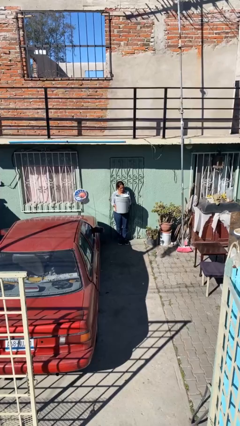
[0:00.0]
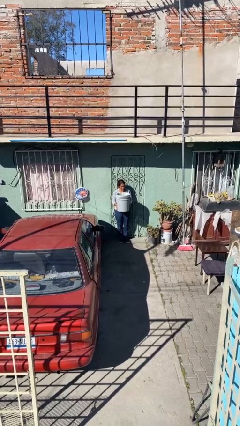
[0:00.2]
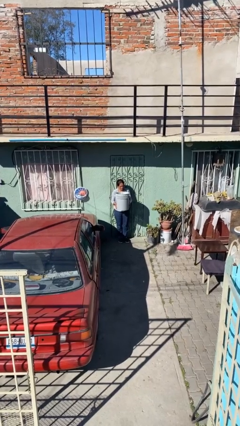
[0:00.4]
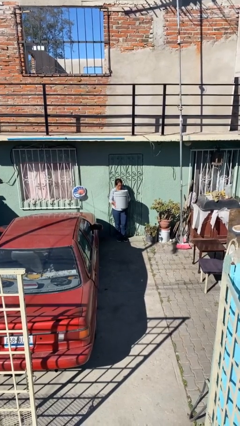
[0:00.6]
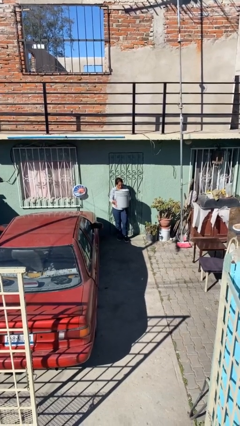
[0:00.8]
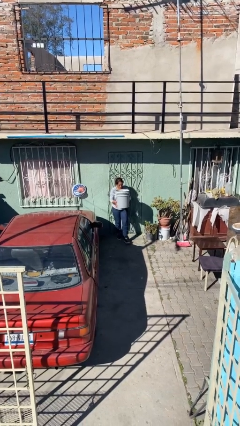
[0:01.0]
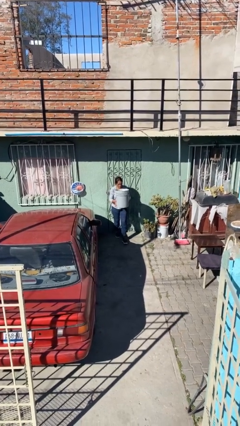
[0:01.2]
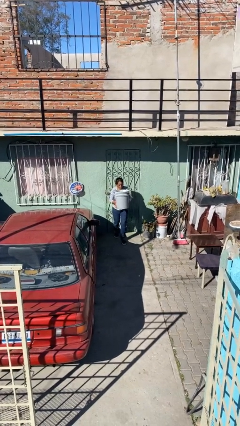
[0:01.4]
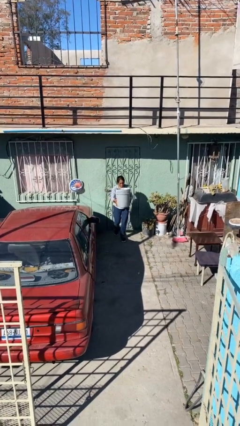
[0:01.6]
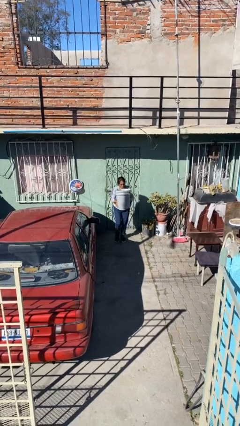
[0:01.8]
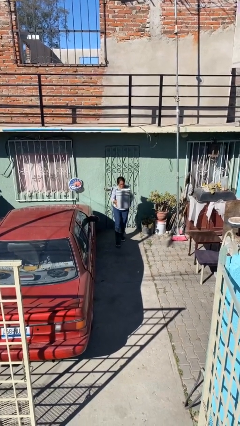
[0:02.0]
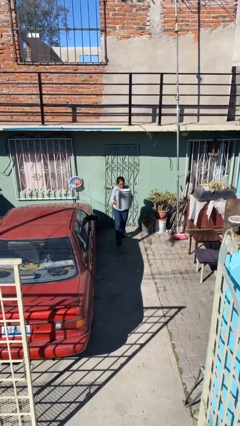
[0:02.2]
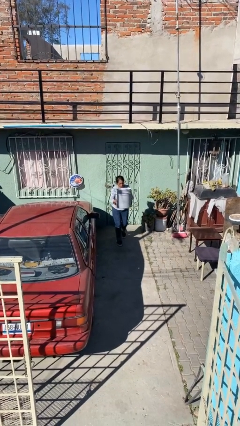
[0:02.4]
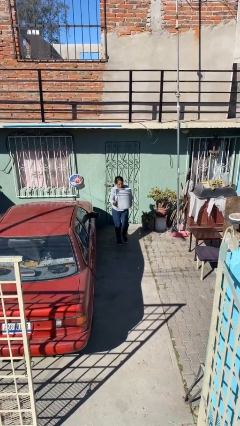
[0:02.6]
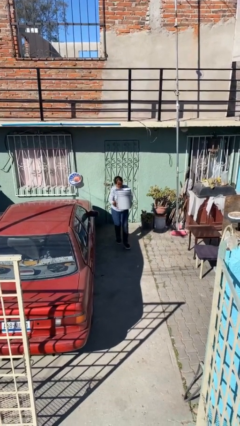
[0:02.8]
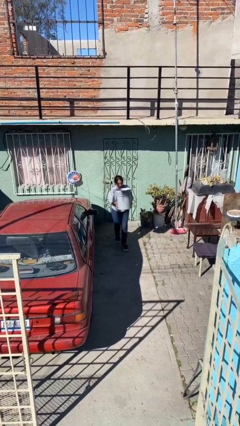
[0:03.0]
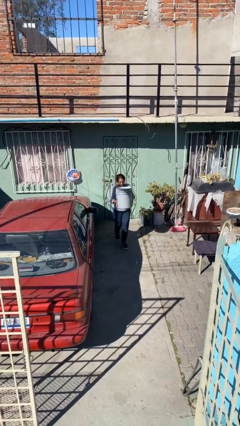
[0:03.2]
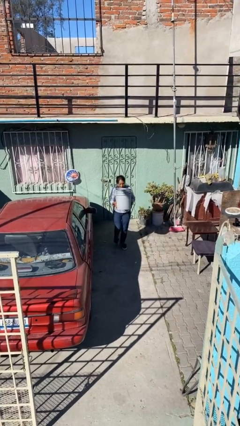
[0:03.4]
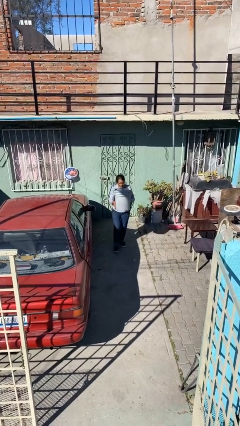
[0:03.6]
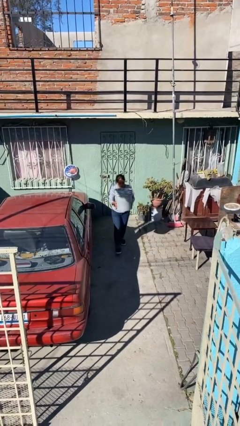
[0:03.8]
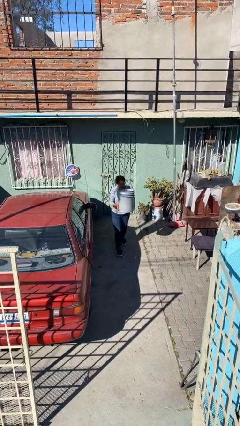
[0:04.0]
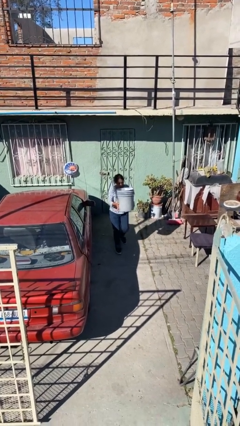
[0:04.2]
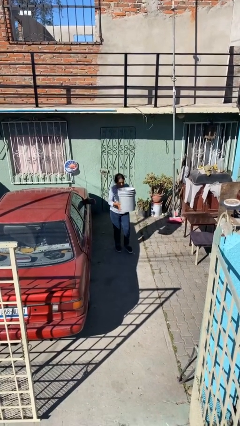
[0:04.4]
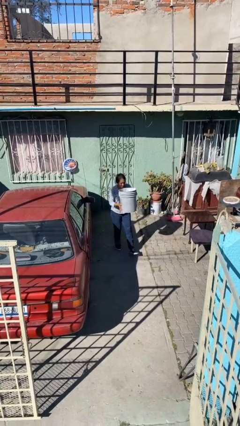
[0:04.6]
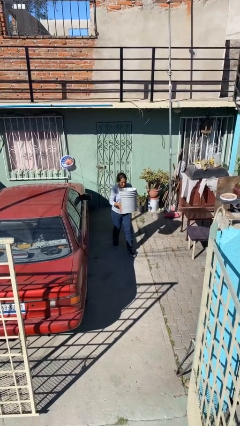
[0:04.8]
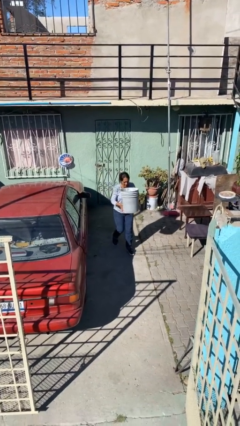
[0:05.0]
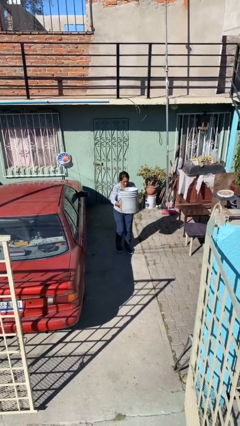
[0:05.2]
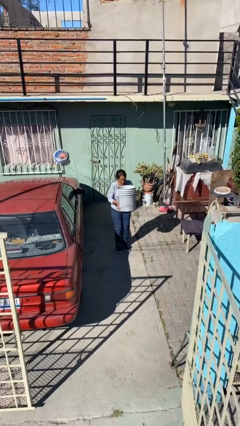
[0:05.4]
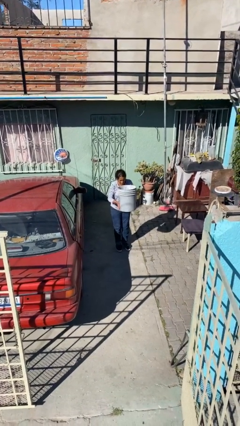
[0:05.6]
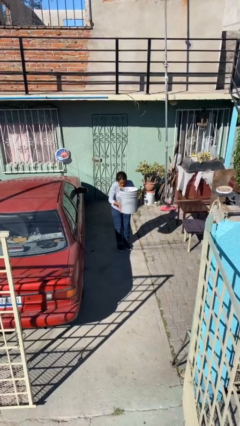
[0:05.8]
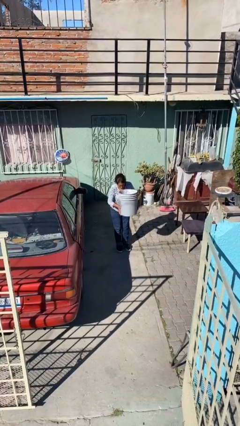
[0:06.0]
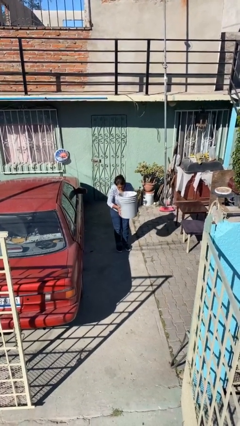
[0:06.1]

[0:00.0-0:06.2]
person carries heavy object

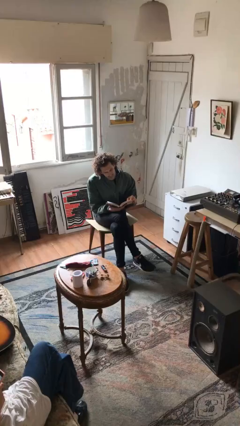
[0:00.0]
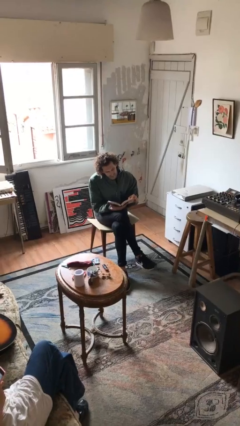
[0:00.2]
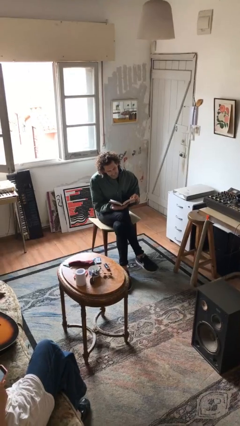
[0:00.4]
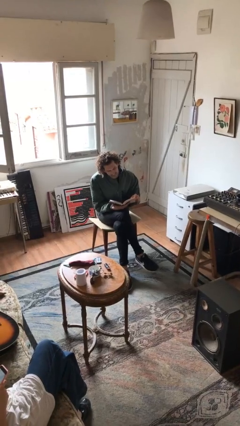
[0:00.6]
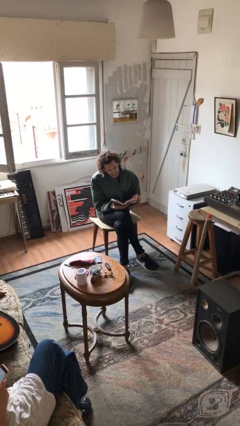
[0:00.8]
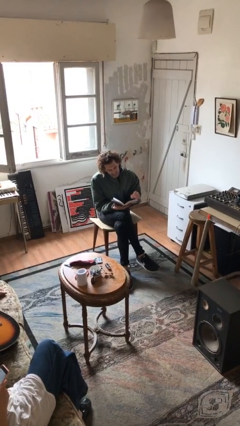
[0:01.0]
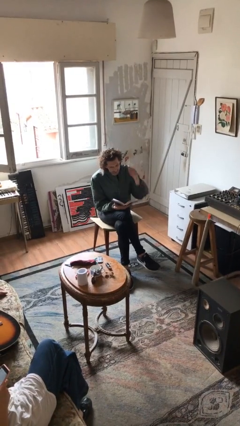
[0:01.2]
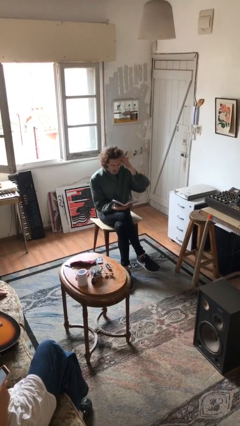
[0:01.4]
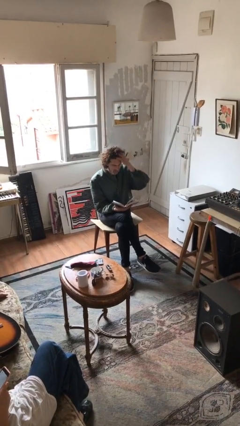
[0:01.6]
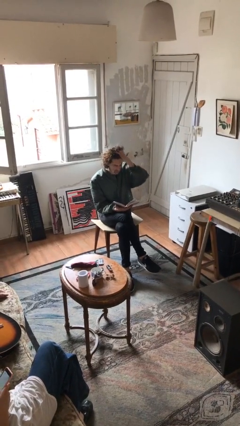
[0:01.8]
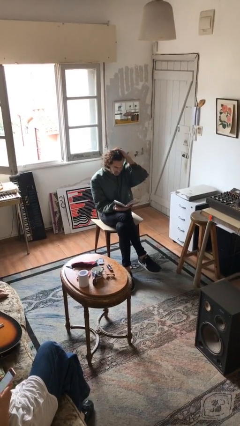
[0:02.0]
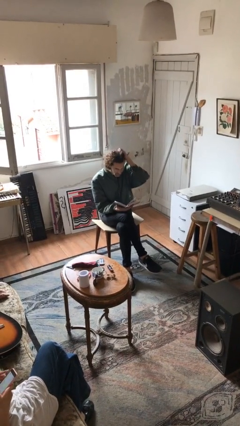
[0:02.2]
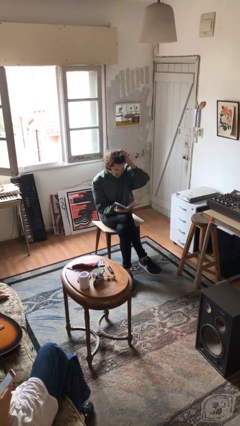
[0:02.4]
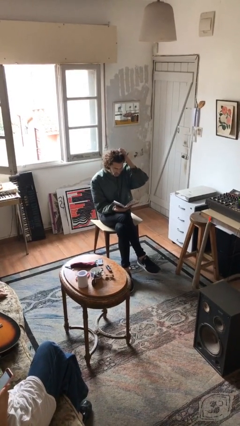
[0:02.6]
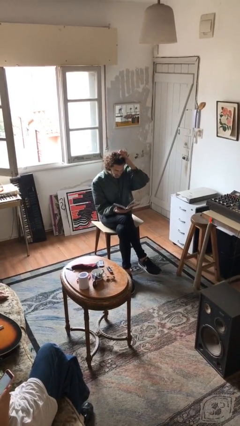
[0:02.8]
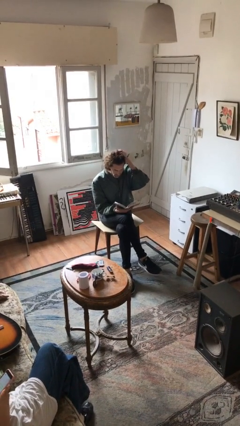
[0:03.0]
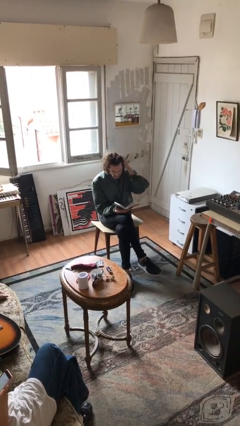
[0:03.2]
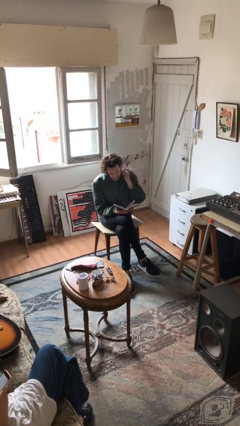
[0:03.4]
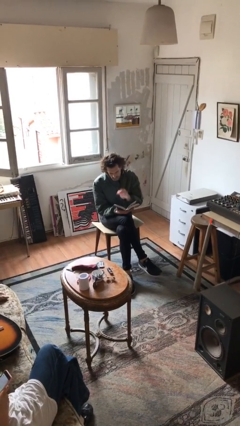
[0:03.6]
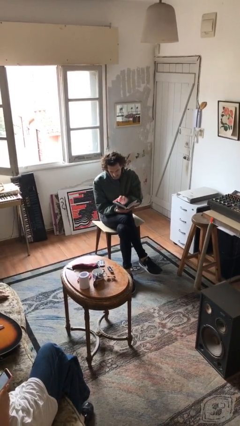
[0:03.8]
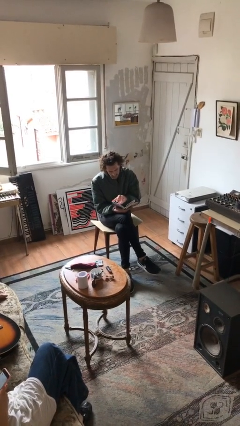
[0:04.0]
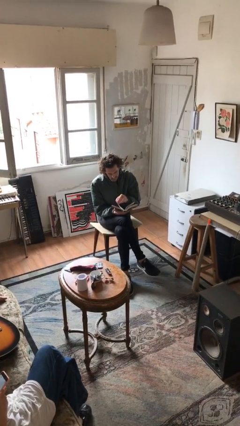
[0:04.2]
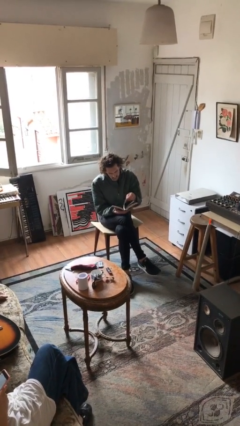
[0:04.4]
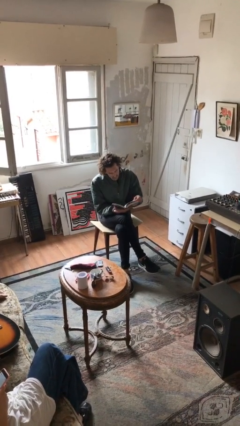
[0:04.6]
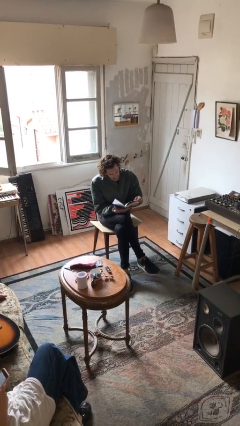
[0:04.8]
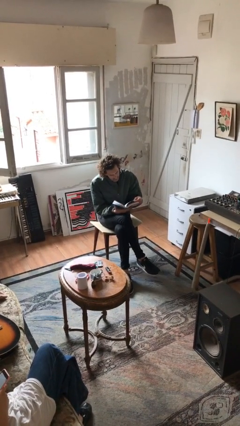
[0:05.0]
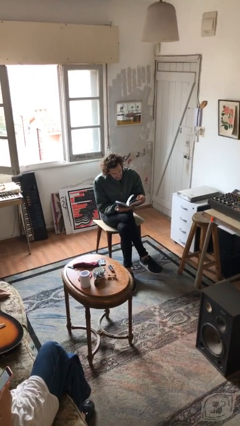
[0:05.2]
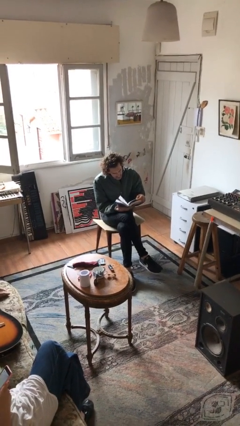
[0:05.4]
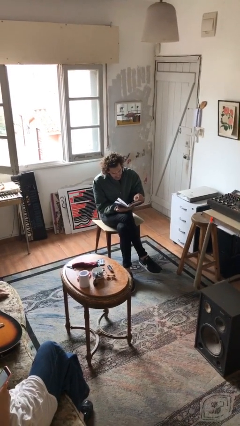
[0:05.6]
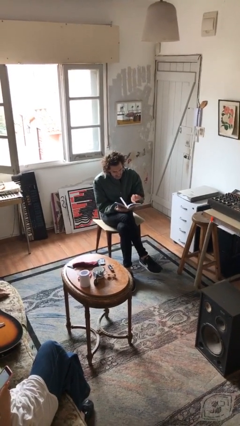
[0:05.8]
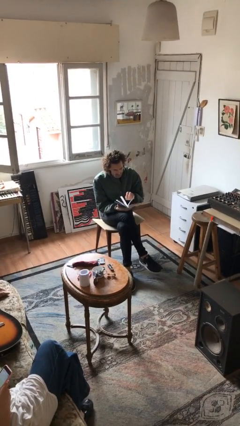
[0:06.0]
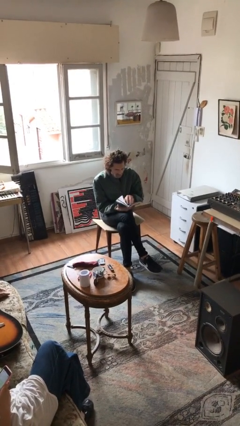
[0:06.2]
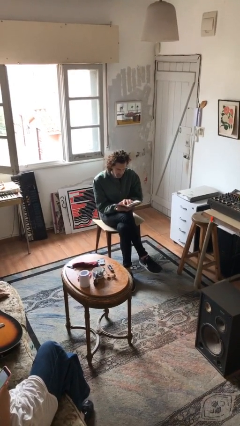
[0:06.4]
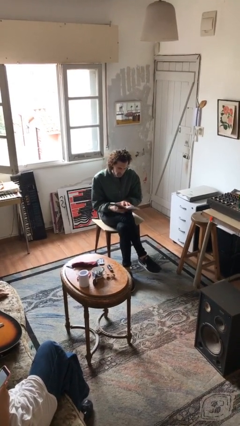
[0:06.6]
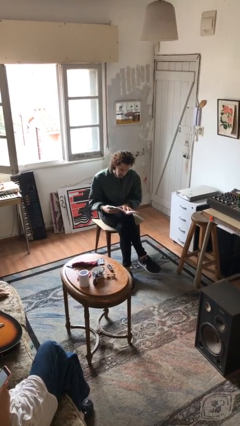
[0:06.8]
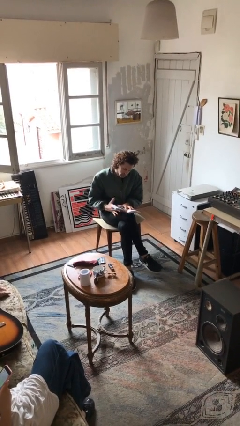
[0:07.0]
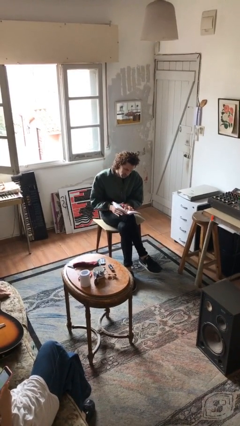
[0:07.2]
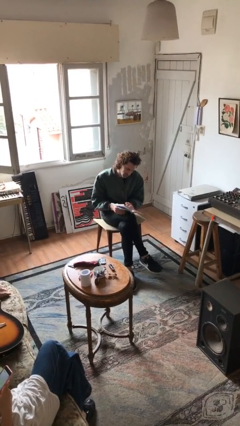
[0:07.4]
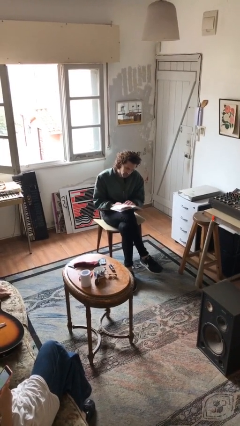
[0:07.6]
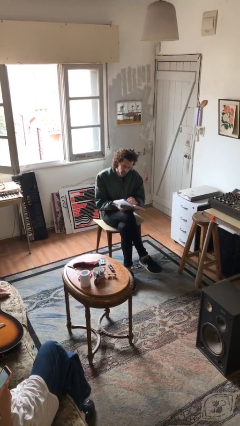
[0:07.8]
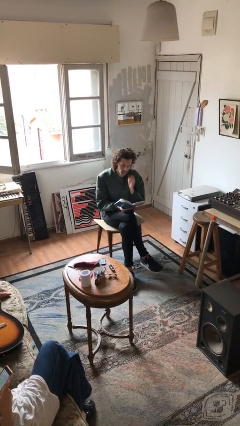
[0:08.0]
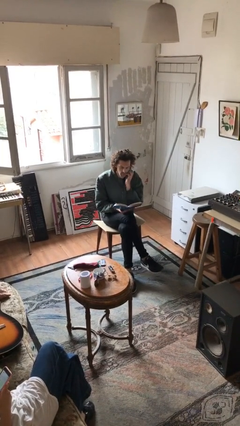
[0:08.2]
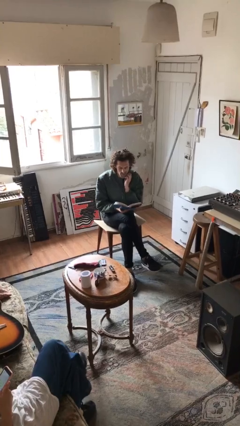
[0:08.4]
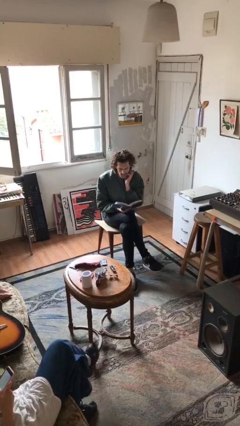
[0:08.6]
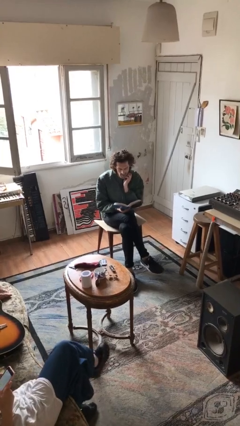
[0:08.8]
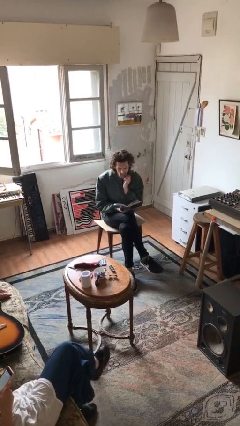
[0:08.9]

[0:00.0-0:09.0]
person reads document

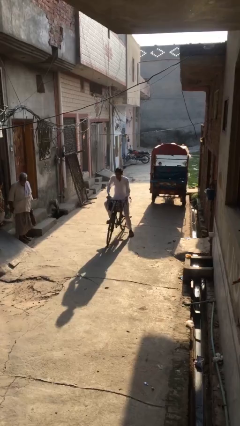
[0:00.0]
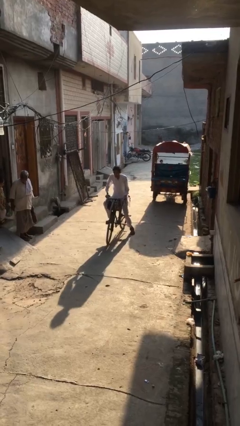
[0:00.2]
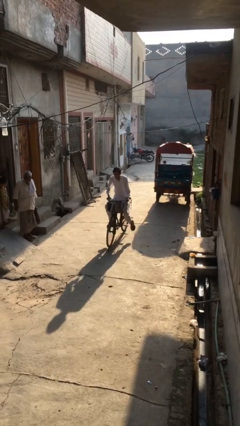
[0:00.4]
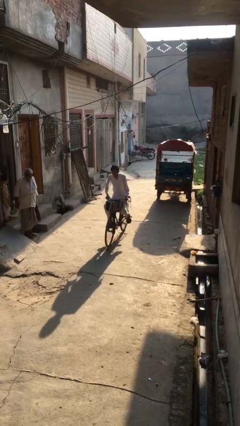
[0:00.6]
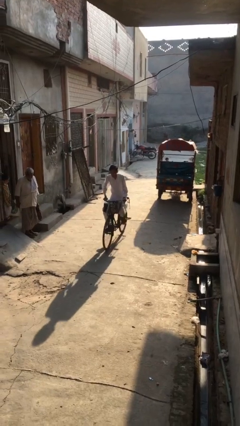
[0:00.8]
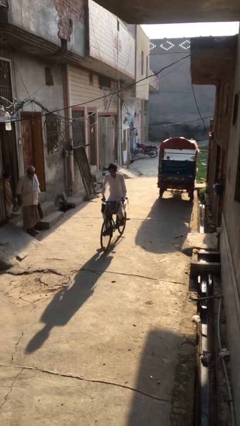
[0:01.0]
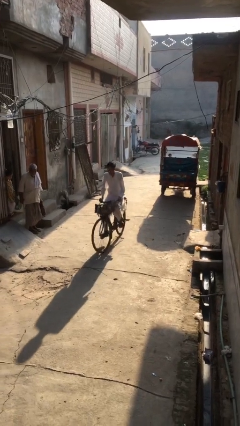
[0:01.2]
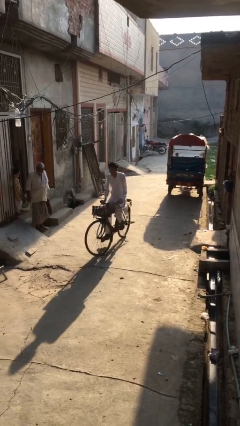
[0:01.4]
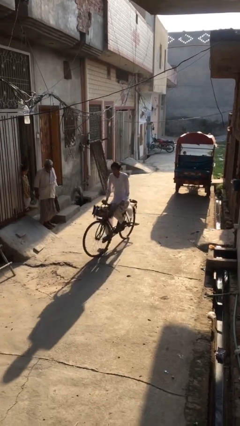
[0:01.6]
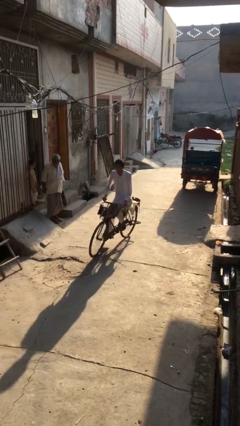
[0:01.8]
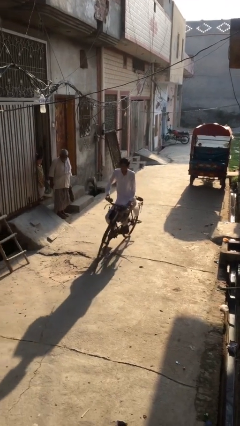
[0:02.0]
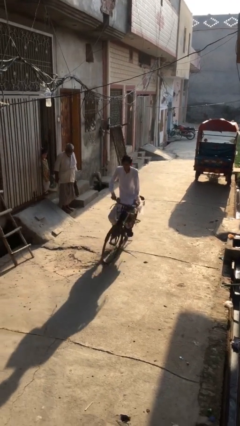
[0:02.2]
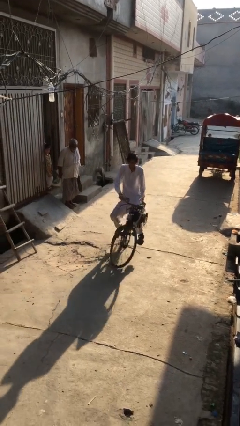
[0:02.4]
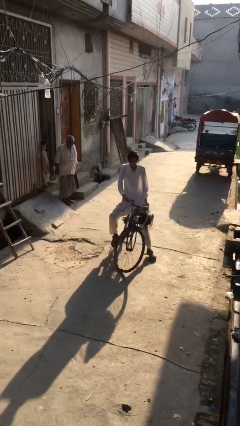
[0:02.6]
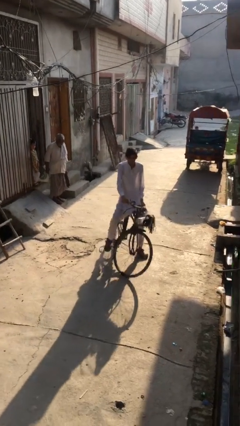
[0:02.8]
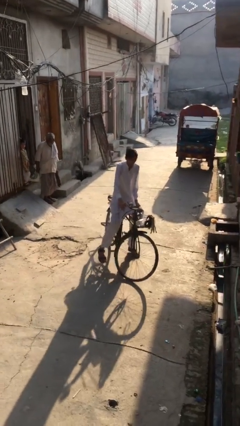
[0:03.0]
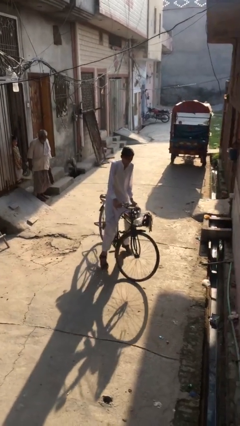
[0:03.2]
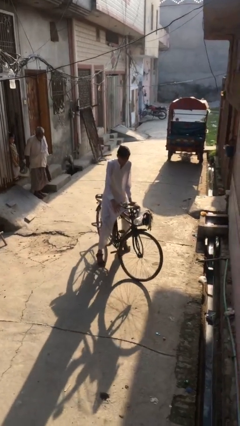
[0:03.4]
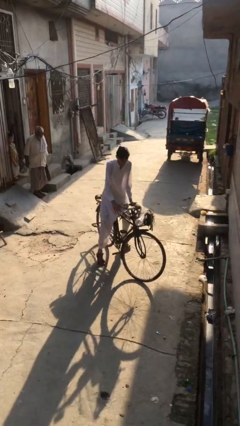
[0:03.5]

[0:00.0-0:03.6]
person rides bicycle
